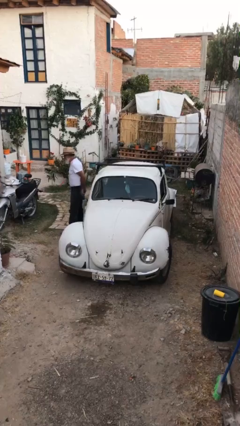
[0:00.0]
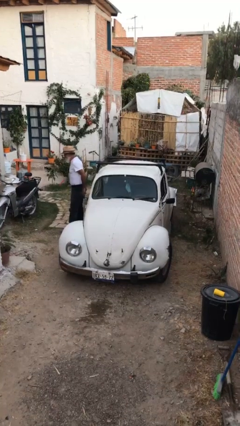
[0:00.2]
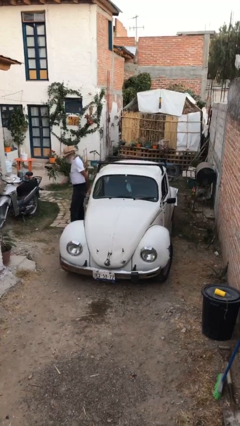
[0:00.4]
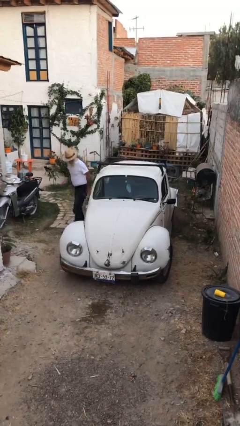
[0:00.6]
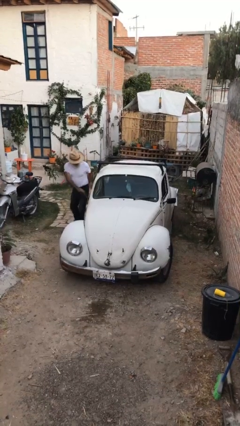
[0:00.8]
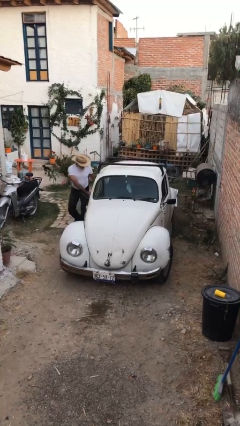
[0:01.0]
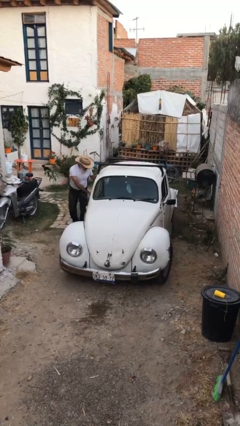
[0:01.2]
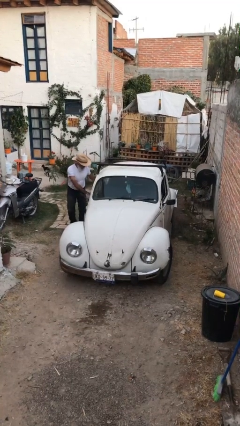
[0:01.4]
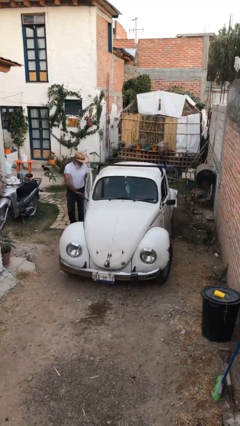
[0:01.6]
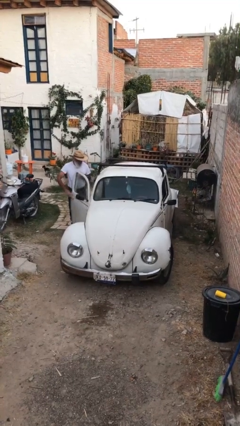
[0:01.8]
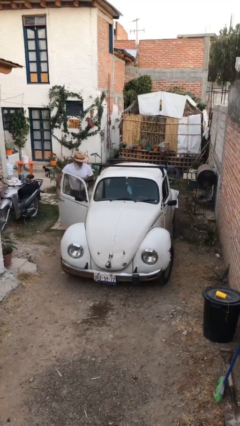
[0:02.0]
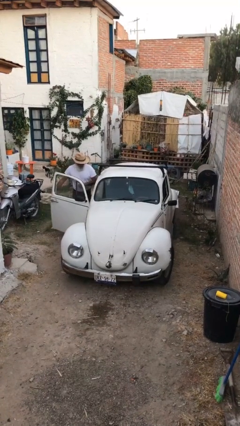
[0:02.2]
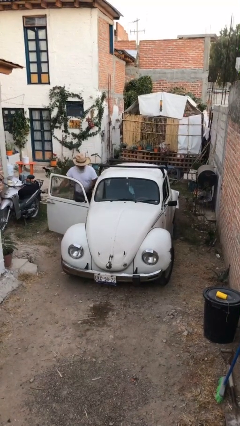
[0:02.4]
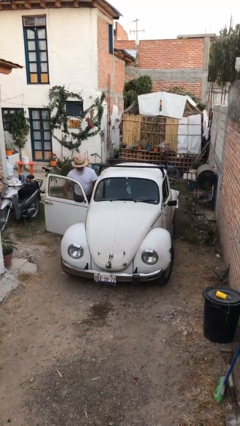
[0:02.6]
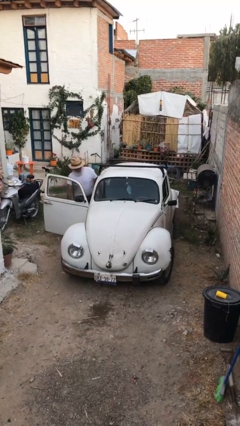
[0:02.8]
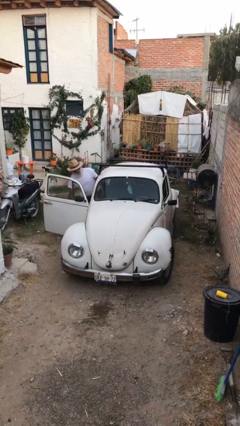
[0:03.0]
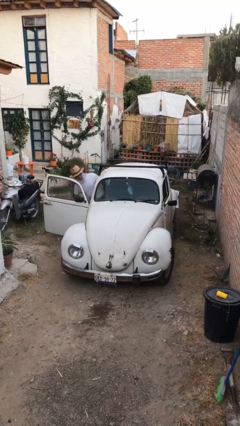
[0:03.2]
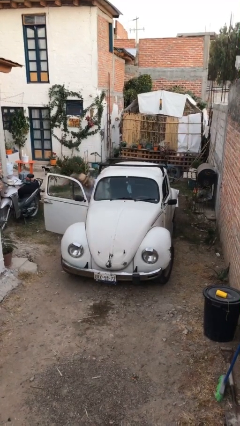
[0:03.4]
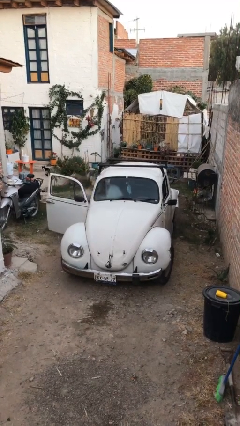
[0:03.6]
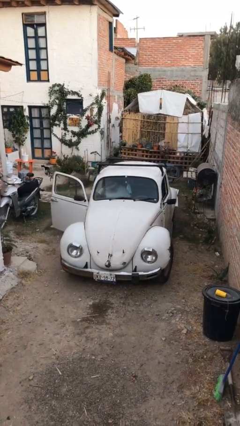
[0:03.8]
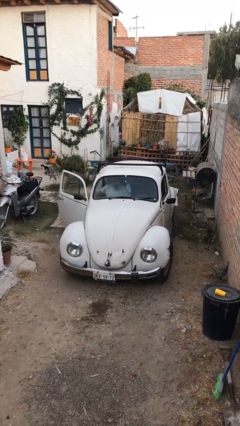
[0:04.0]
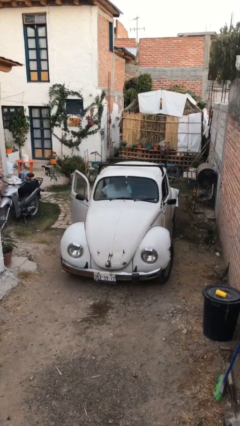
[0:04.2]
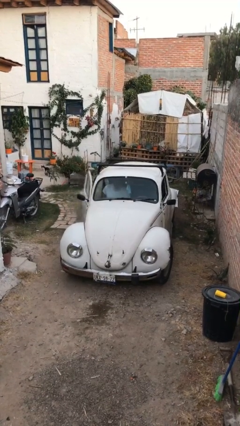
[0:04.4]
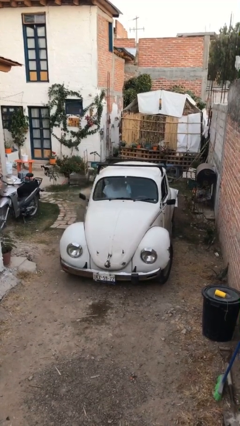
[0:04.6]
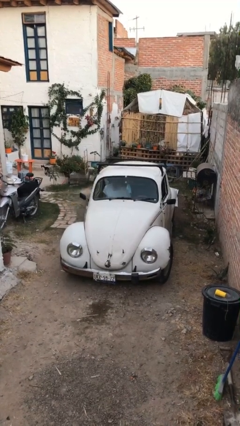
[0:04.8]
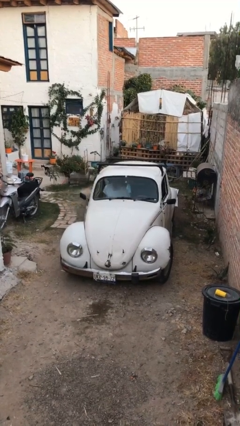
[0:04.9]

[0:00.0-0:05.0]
car picks up person

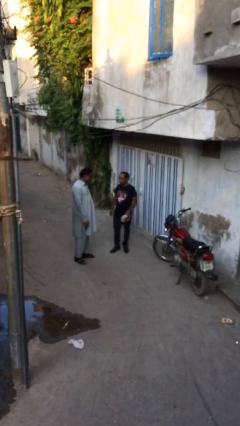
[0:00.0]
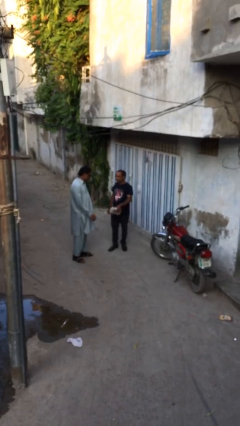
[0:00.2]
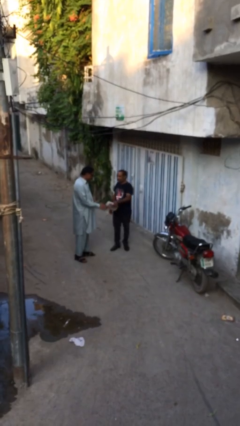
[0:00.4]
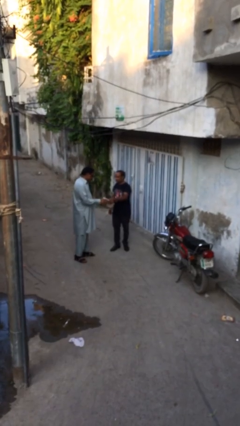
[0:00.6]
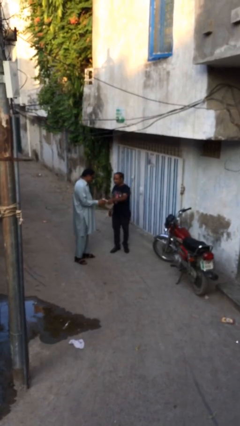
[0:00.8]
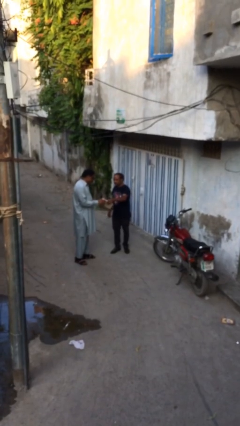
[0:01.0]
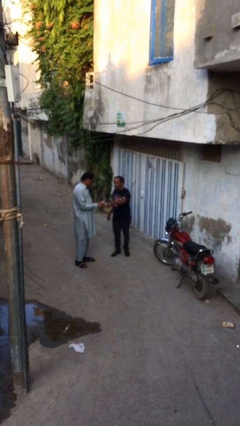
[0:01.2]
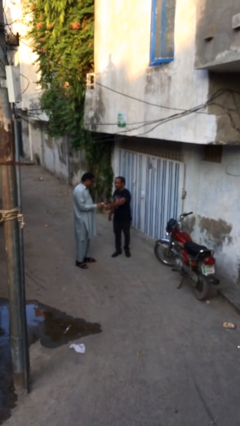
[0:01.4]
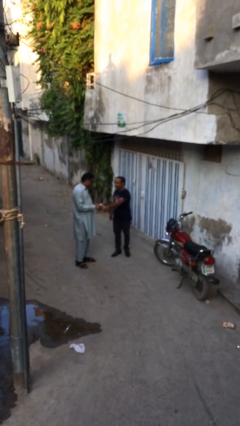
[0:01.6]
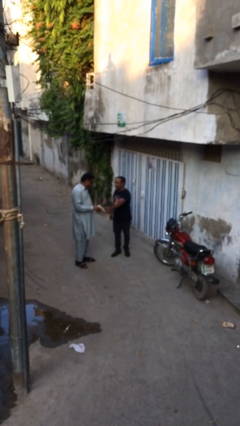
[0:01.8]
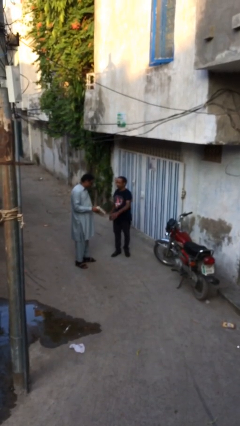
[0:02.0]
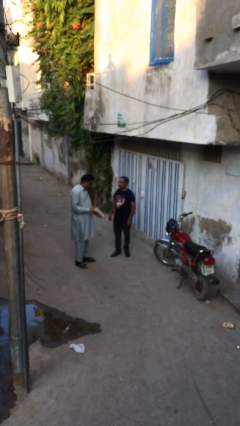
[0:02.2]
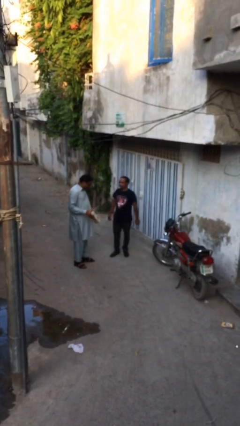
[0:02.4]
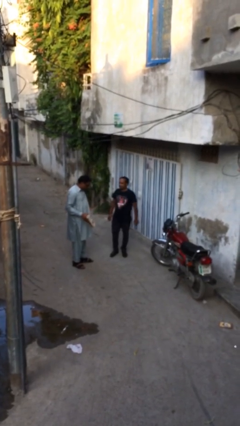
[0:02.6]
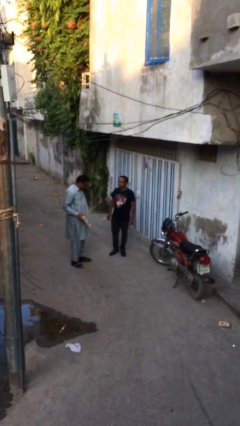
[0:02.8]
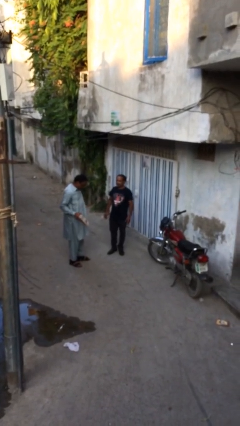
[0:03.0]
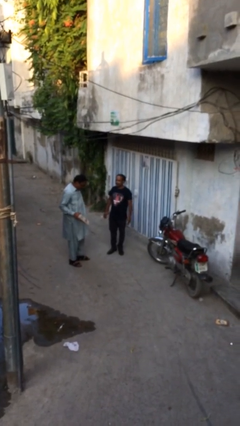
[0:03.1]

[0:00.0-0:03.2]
person transfers object to person

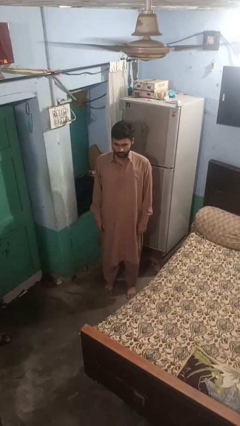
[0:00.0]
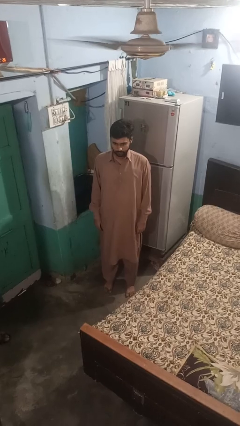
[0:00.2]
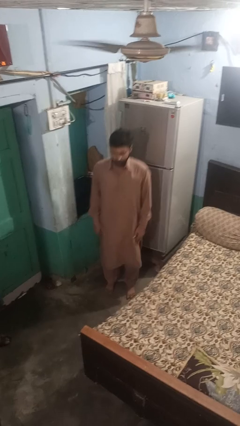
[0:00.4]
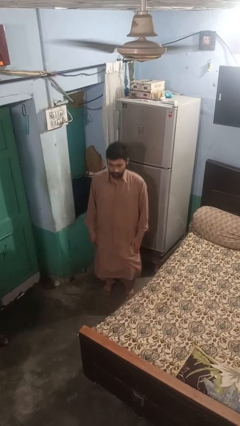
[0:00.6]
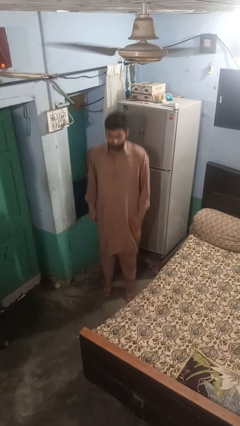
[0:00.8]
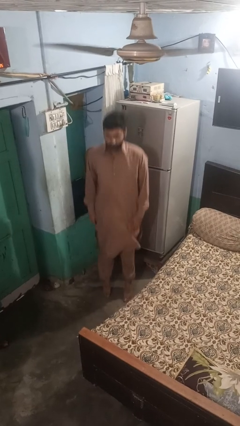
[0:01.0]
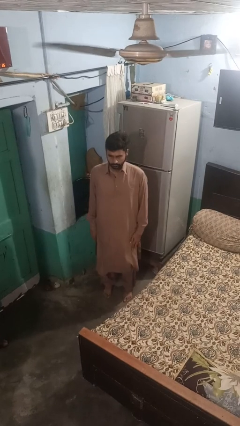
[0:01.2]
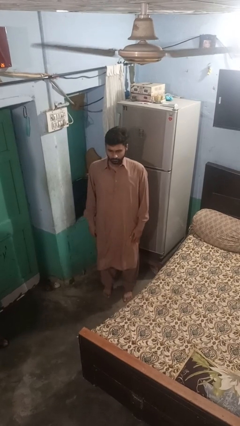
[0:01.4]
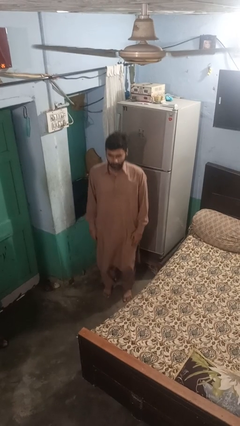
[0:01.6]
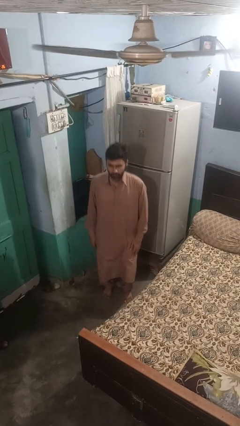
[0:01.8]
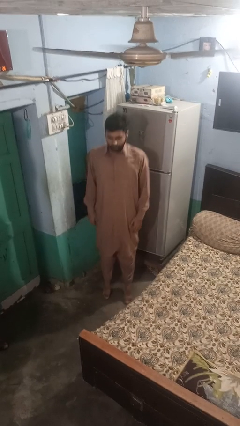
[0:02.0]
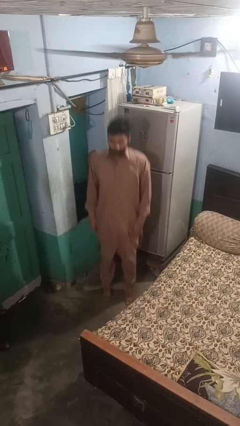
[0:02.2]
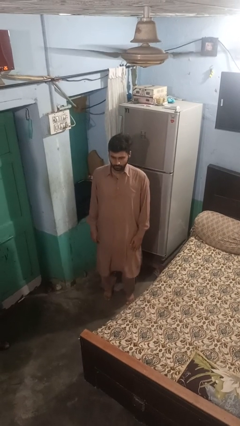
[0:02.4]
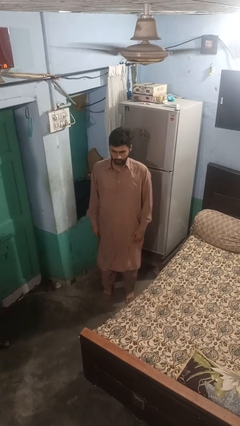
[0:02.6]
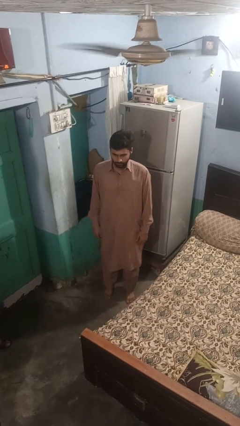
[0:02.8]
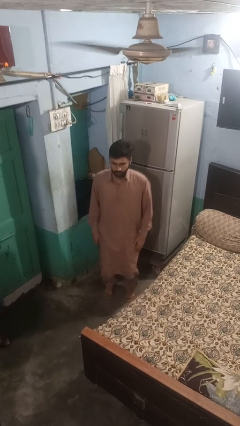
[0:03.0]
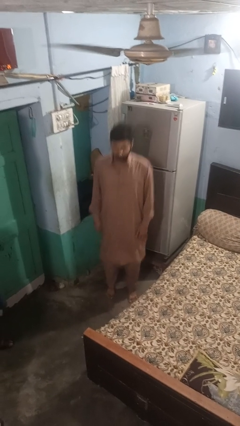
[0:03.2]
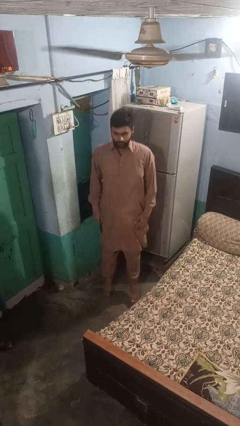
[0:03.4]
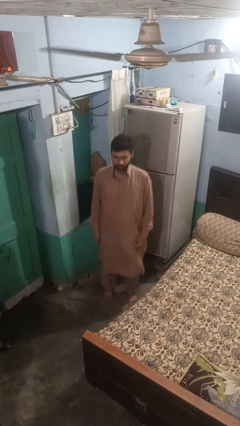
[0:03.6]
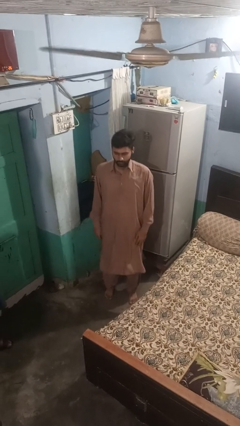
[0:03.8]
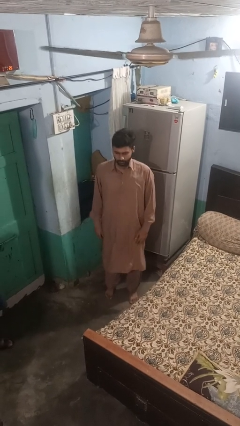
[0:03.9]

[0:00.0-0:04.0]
person jumps

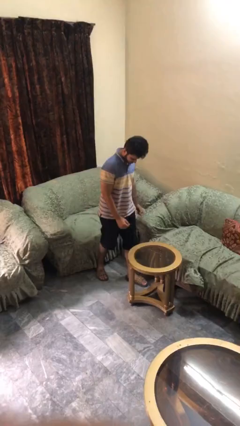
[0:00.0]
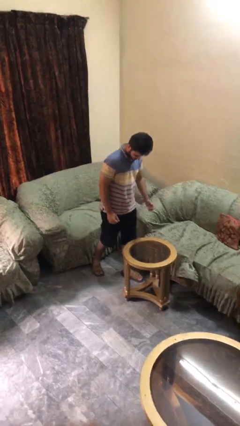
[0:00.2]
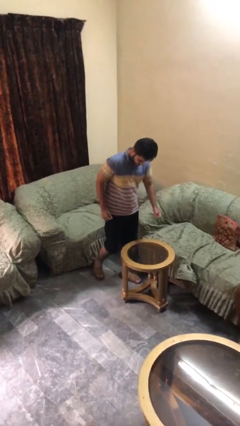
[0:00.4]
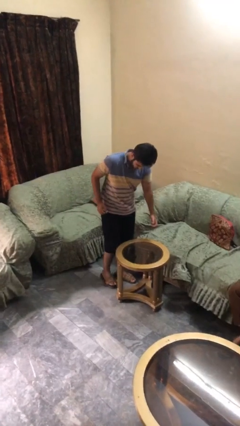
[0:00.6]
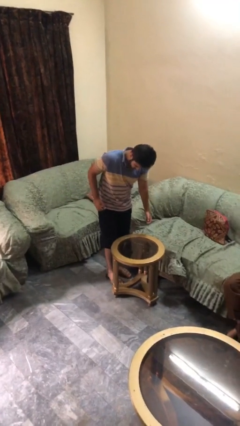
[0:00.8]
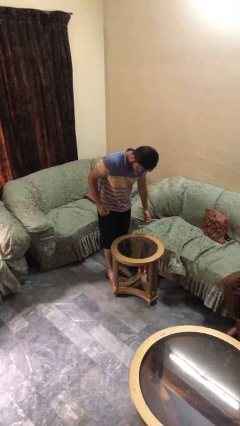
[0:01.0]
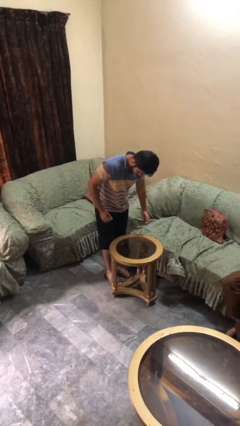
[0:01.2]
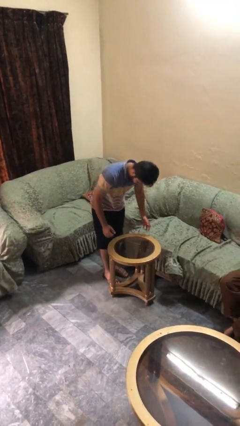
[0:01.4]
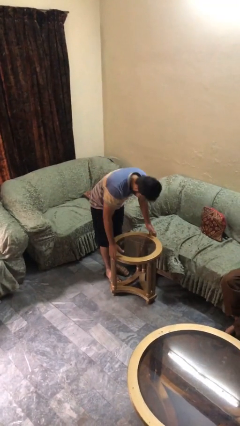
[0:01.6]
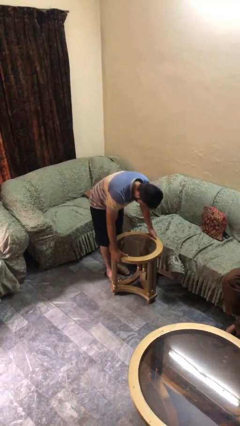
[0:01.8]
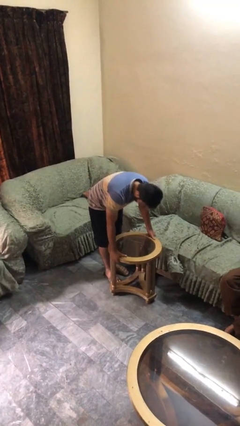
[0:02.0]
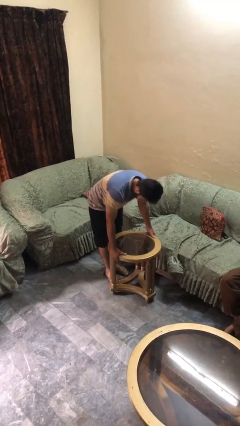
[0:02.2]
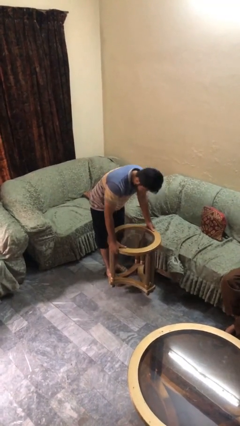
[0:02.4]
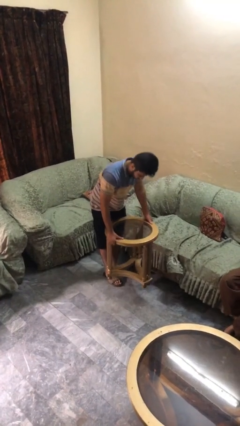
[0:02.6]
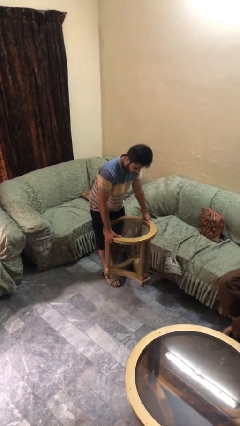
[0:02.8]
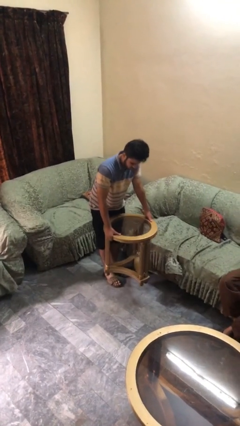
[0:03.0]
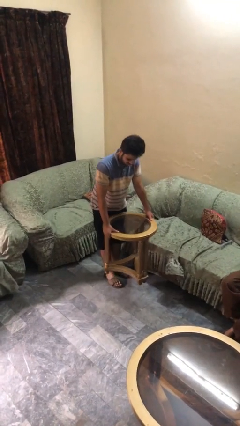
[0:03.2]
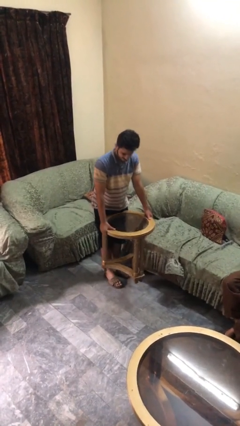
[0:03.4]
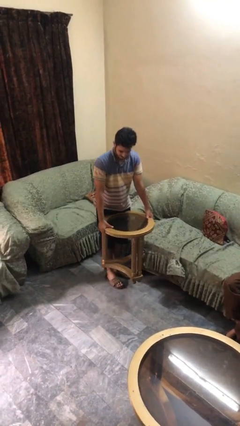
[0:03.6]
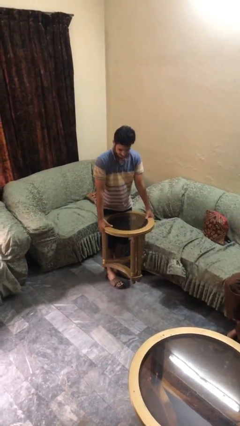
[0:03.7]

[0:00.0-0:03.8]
person picks up object from floor

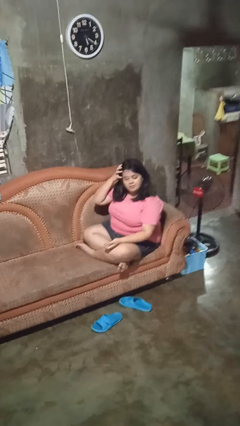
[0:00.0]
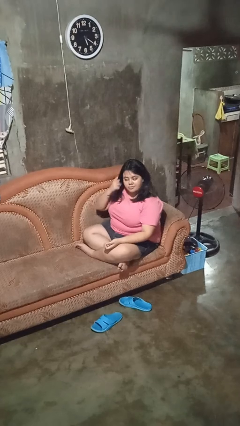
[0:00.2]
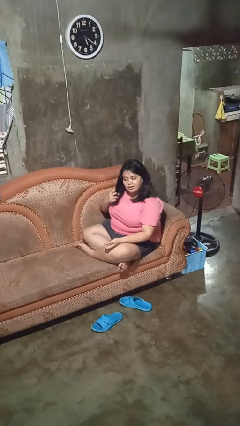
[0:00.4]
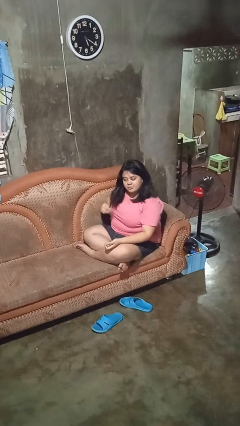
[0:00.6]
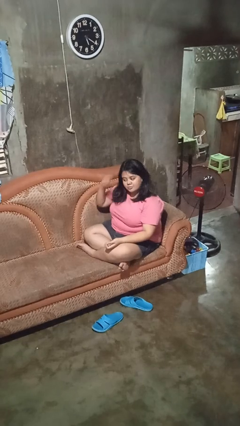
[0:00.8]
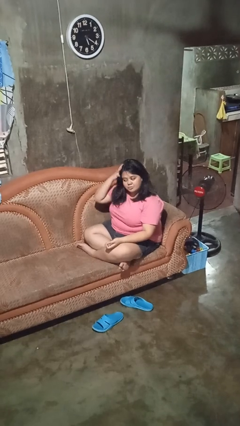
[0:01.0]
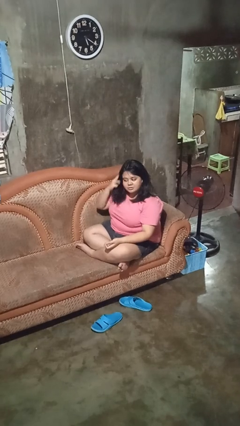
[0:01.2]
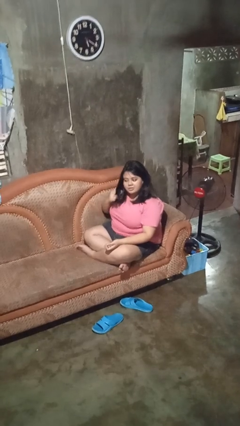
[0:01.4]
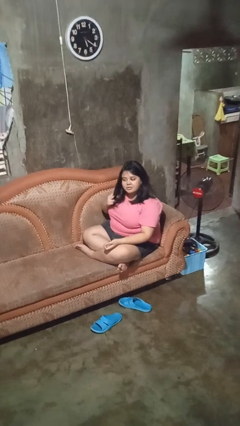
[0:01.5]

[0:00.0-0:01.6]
person strokes hair
